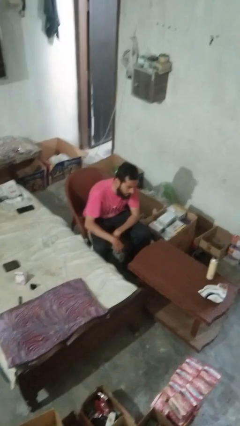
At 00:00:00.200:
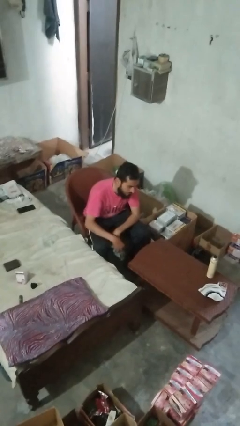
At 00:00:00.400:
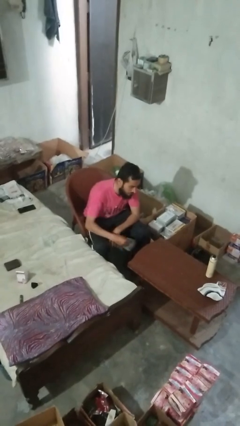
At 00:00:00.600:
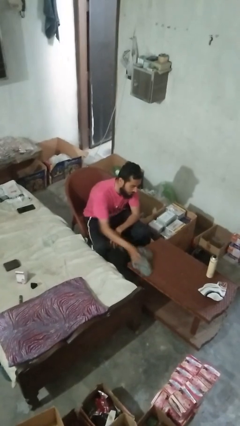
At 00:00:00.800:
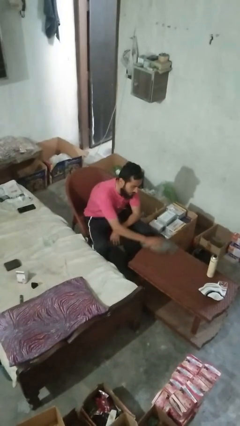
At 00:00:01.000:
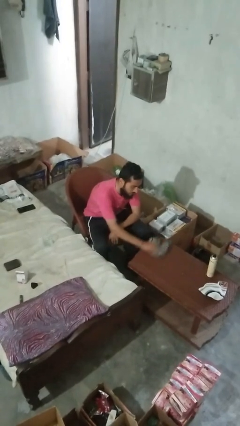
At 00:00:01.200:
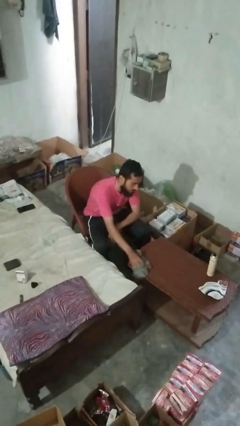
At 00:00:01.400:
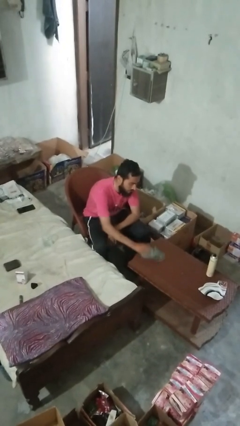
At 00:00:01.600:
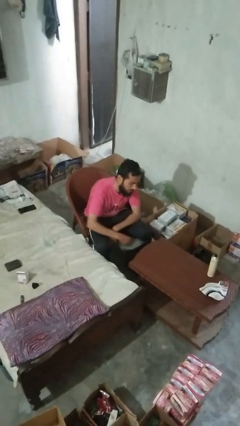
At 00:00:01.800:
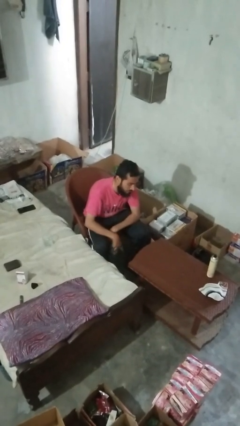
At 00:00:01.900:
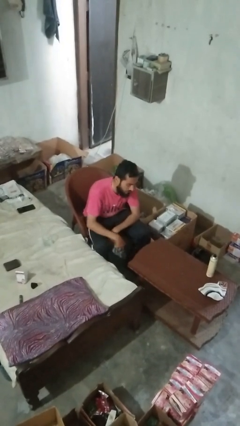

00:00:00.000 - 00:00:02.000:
person cleans table with rag

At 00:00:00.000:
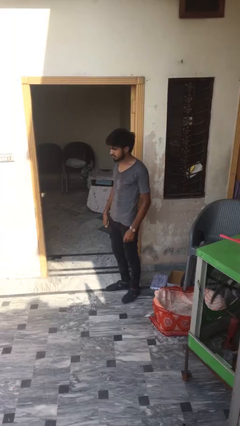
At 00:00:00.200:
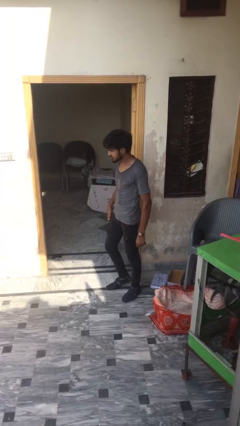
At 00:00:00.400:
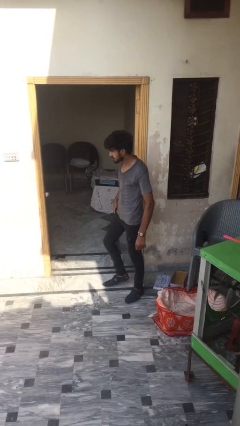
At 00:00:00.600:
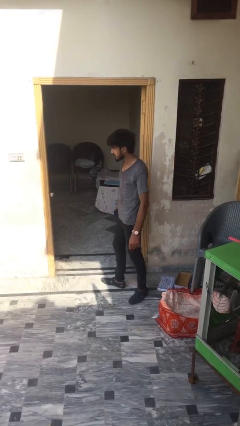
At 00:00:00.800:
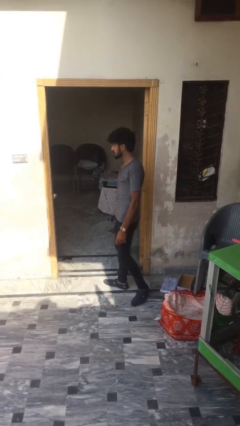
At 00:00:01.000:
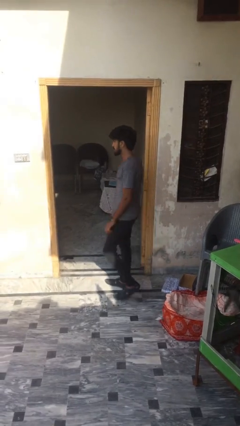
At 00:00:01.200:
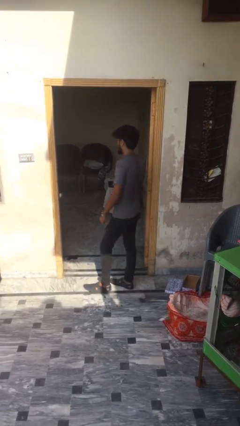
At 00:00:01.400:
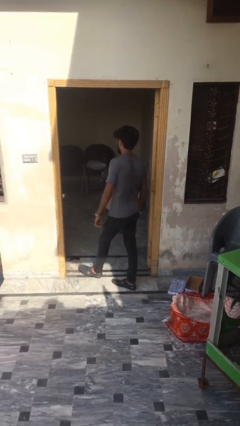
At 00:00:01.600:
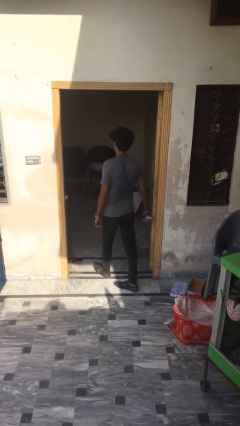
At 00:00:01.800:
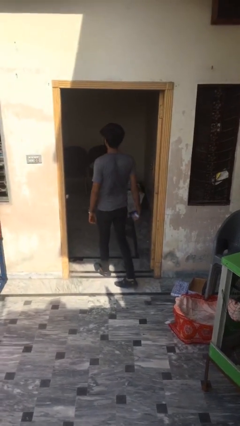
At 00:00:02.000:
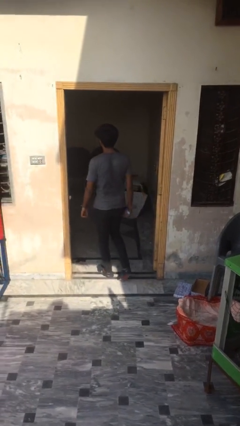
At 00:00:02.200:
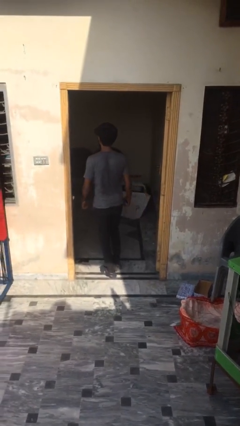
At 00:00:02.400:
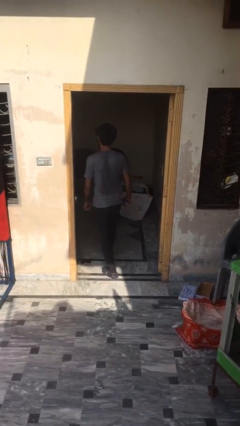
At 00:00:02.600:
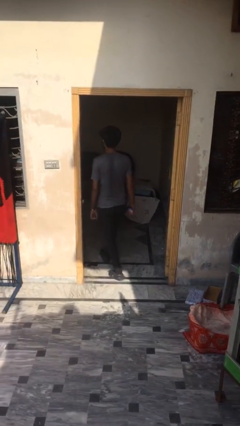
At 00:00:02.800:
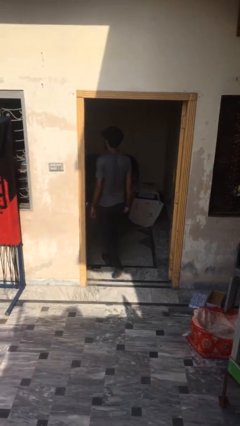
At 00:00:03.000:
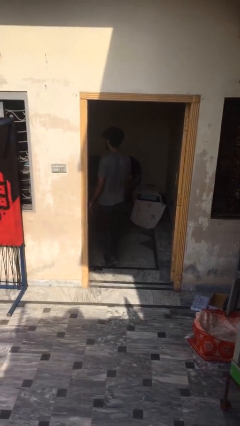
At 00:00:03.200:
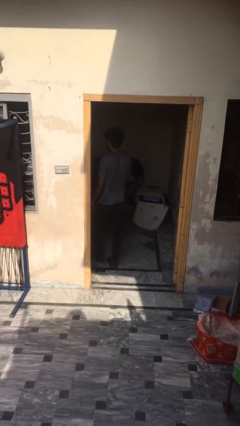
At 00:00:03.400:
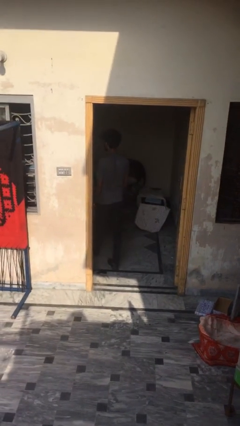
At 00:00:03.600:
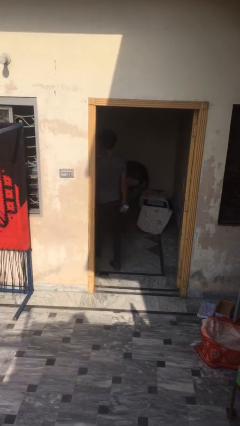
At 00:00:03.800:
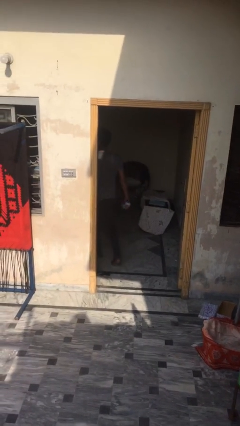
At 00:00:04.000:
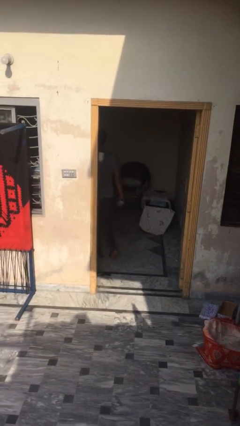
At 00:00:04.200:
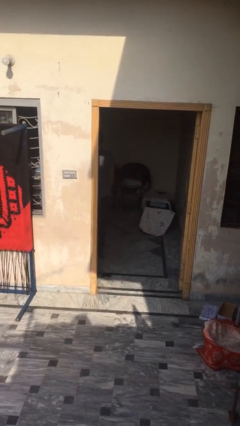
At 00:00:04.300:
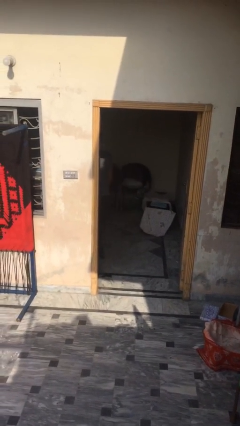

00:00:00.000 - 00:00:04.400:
person exits scene through structure

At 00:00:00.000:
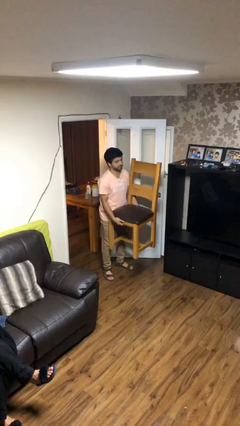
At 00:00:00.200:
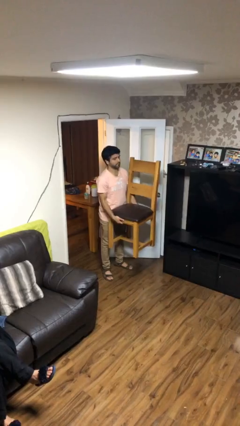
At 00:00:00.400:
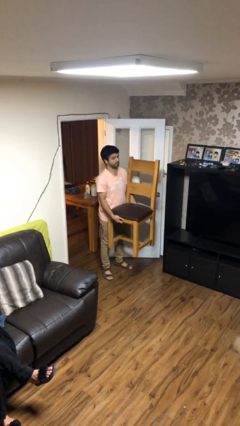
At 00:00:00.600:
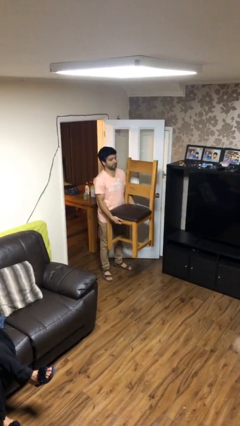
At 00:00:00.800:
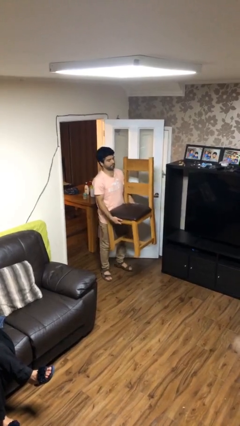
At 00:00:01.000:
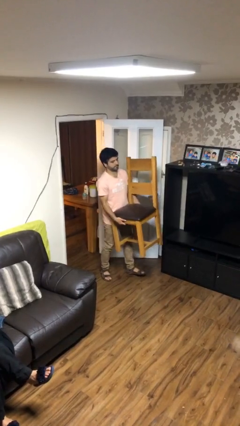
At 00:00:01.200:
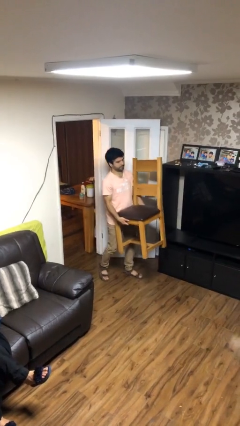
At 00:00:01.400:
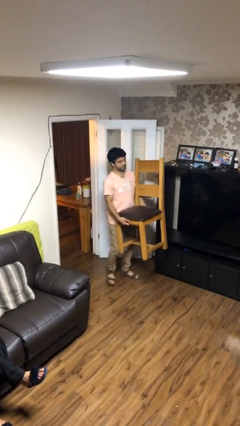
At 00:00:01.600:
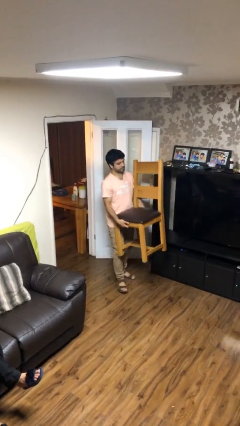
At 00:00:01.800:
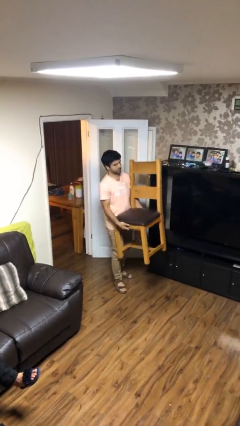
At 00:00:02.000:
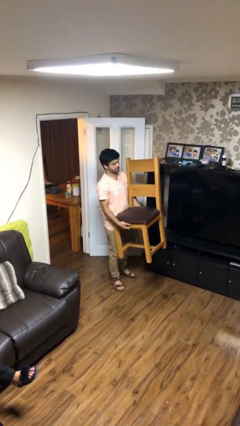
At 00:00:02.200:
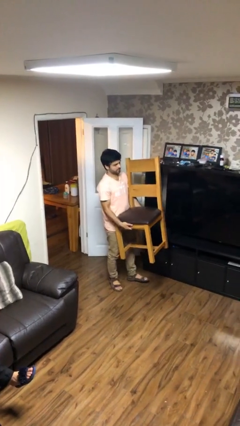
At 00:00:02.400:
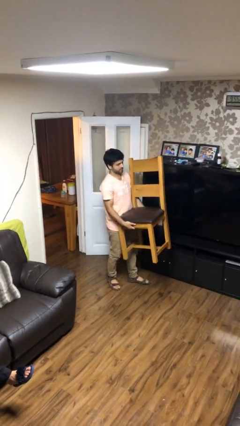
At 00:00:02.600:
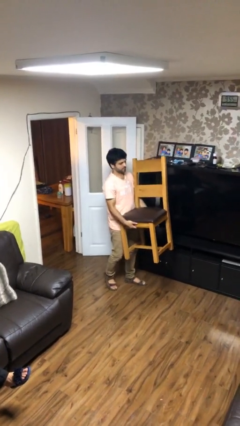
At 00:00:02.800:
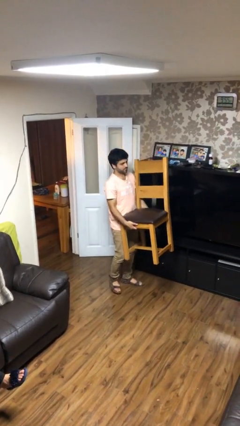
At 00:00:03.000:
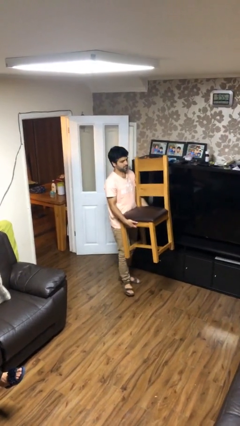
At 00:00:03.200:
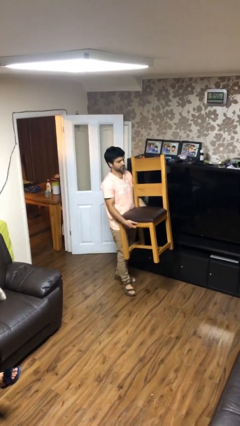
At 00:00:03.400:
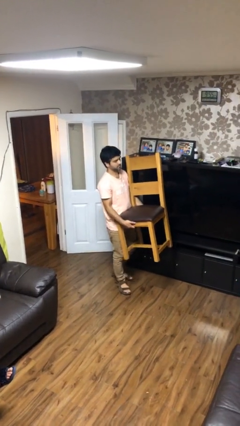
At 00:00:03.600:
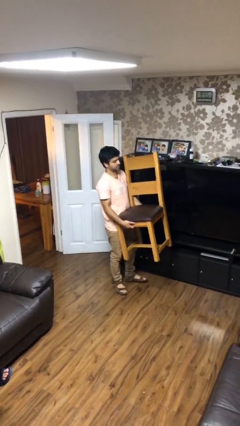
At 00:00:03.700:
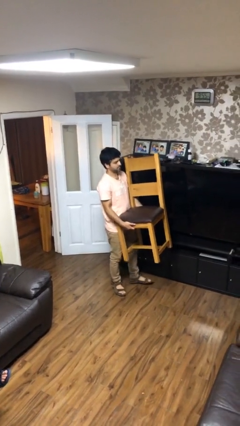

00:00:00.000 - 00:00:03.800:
person carries heavy object

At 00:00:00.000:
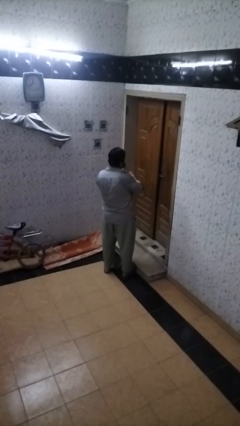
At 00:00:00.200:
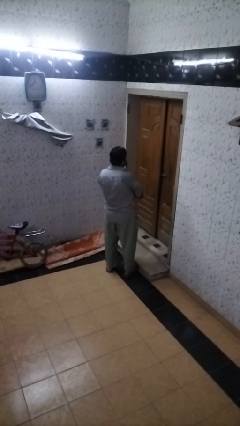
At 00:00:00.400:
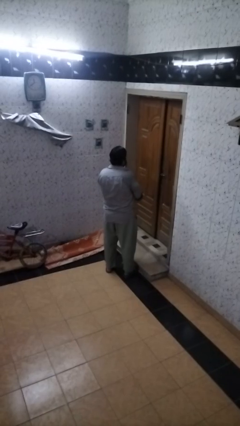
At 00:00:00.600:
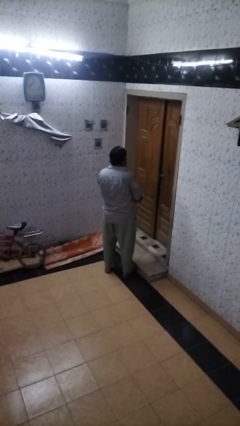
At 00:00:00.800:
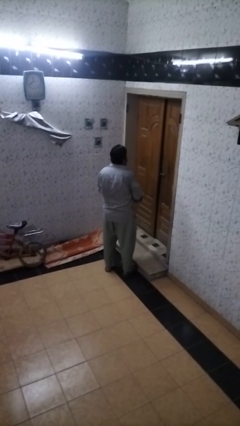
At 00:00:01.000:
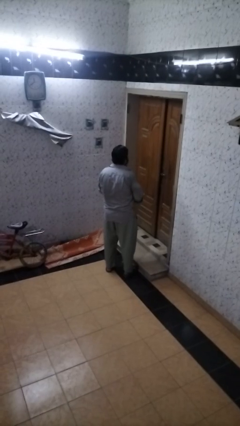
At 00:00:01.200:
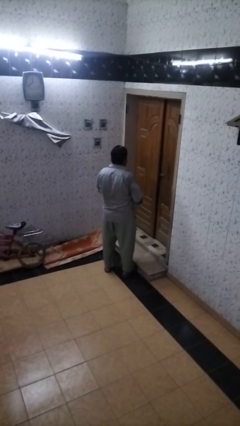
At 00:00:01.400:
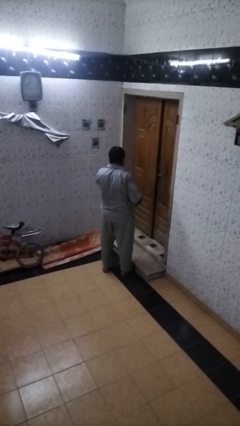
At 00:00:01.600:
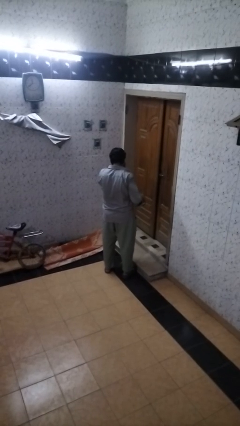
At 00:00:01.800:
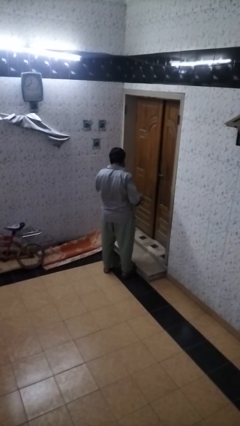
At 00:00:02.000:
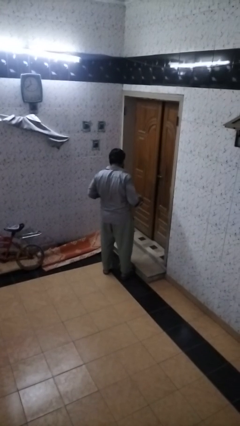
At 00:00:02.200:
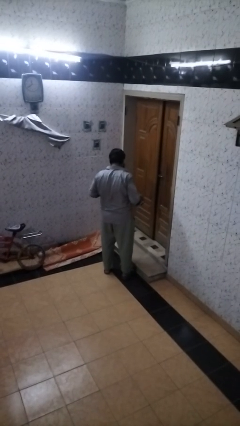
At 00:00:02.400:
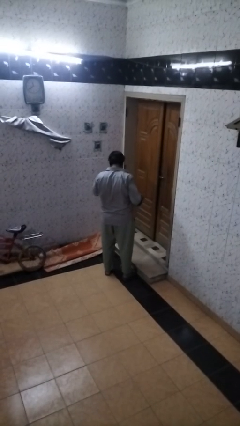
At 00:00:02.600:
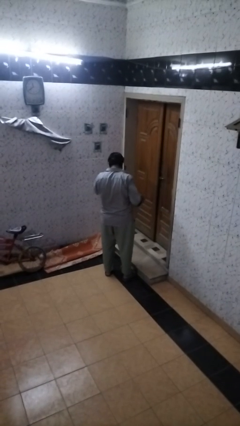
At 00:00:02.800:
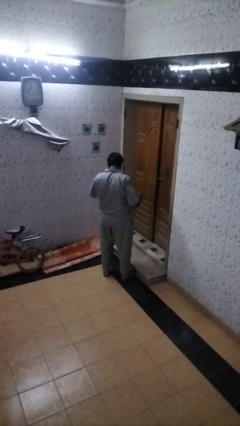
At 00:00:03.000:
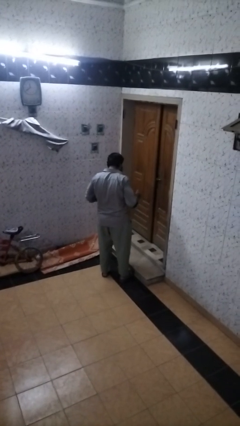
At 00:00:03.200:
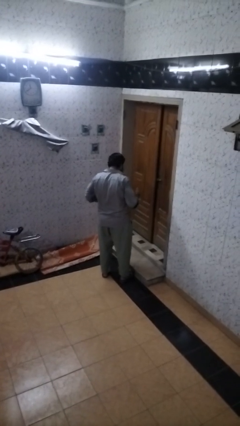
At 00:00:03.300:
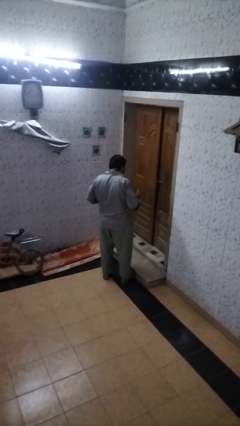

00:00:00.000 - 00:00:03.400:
person takes off wristwatch

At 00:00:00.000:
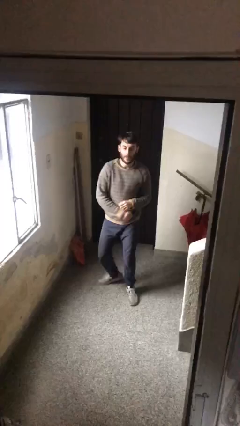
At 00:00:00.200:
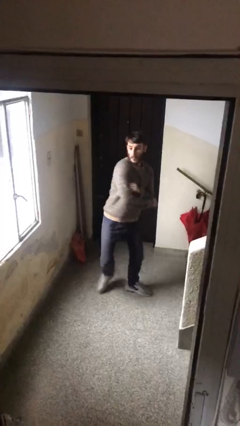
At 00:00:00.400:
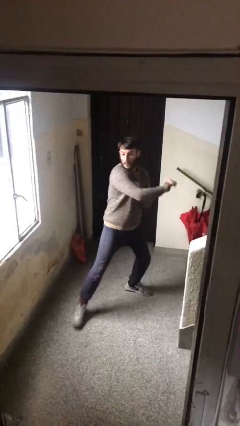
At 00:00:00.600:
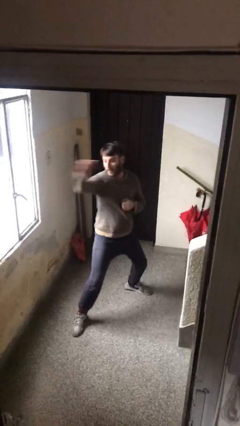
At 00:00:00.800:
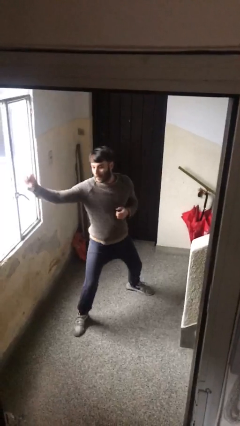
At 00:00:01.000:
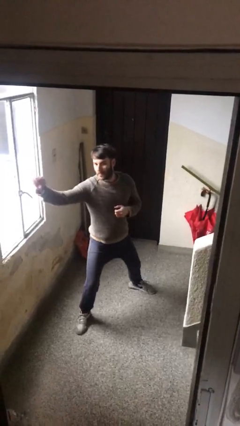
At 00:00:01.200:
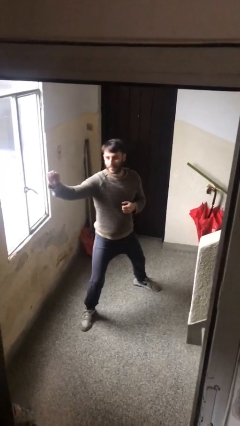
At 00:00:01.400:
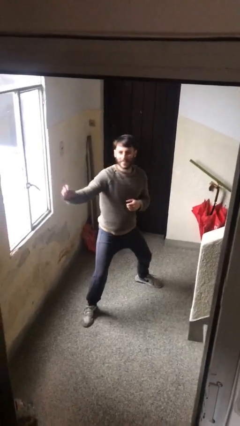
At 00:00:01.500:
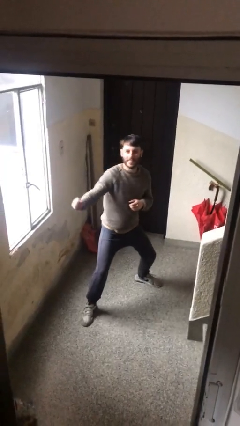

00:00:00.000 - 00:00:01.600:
person karate chop

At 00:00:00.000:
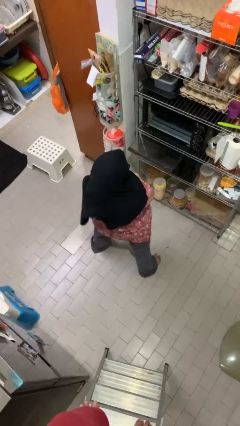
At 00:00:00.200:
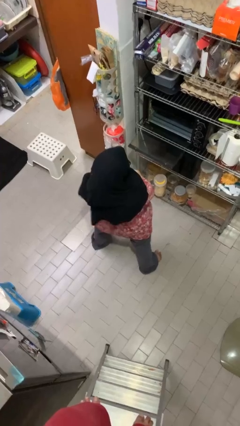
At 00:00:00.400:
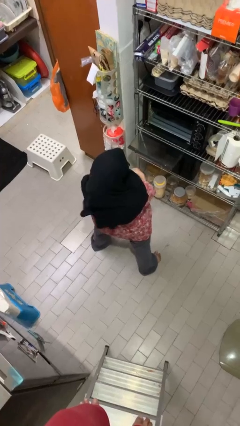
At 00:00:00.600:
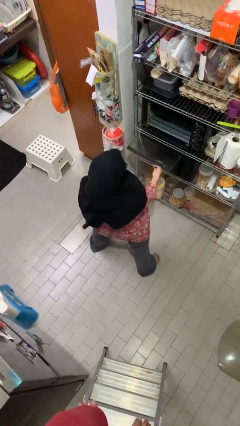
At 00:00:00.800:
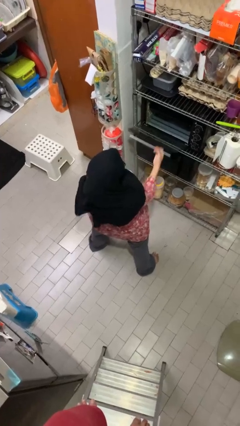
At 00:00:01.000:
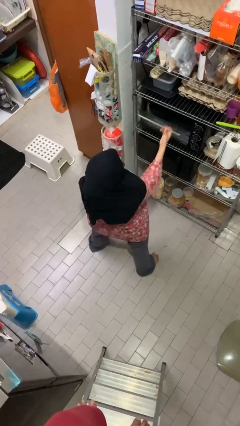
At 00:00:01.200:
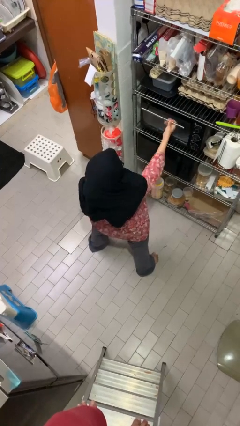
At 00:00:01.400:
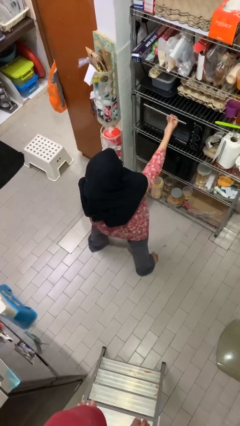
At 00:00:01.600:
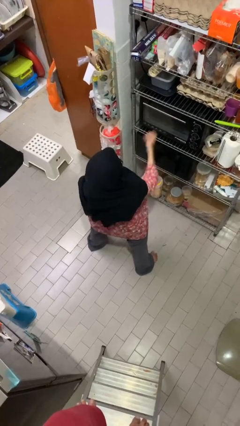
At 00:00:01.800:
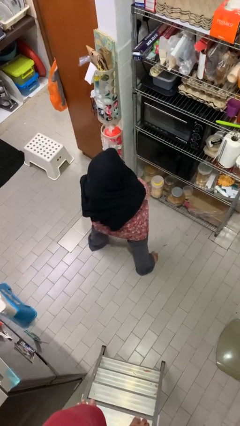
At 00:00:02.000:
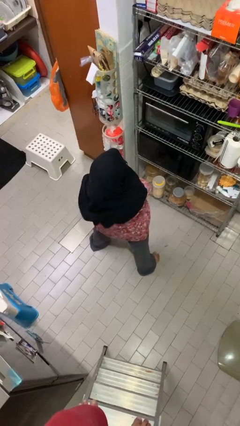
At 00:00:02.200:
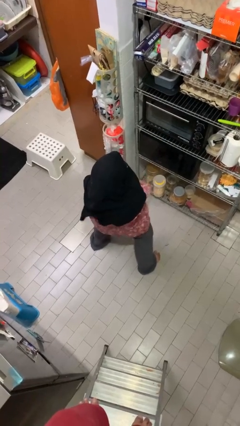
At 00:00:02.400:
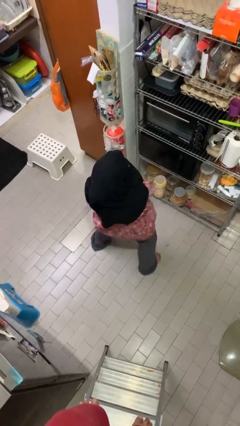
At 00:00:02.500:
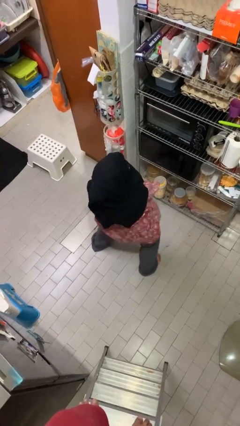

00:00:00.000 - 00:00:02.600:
person closes oven door
